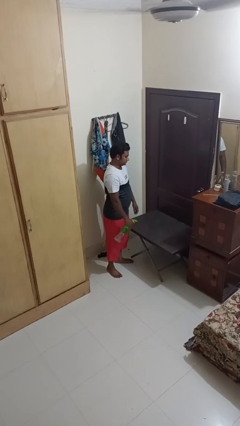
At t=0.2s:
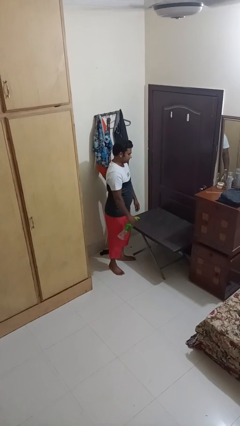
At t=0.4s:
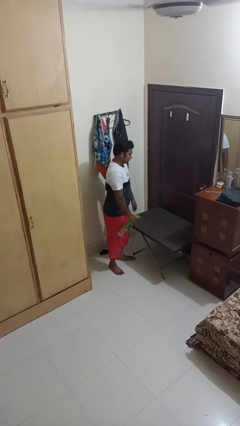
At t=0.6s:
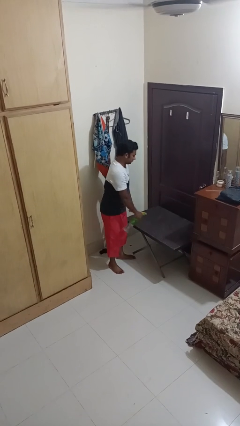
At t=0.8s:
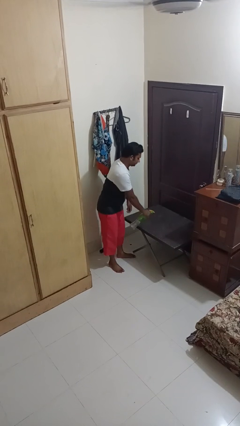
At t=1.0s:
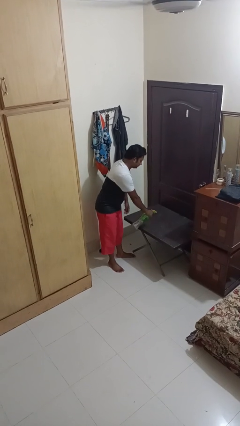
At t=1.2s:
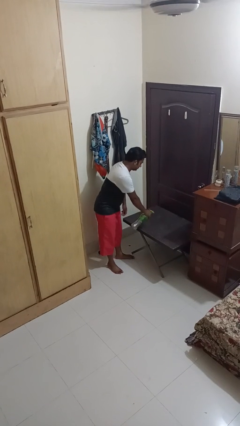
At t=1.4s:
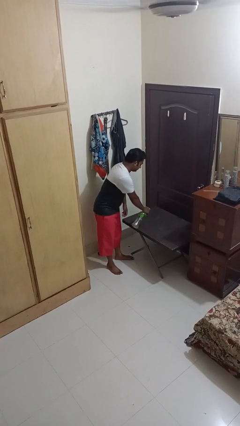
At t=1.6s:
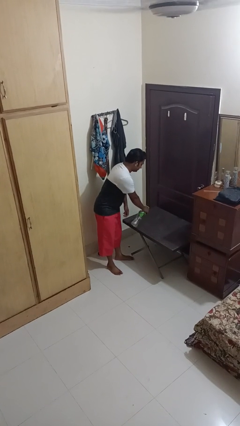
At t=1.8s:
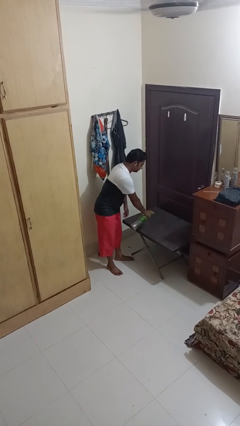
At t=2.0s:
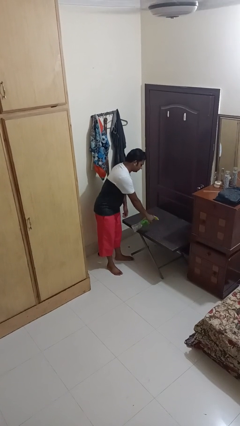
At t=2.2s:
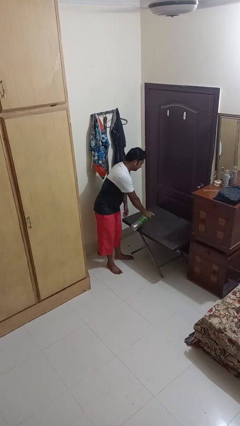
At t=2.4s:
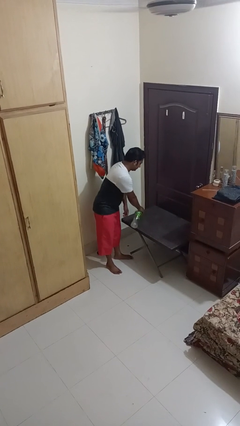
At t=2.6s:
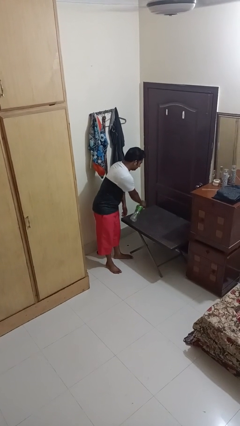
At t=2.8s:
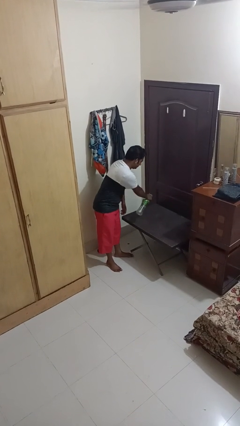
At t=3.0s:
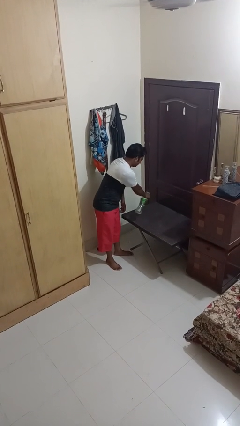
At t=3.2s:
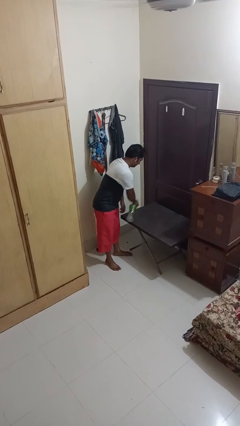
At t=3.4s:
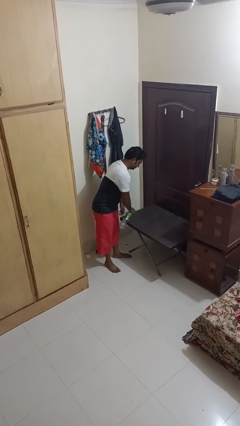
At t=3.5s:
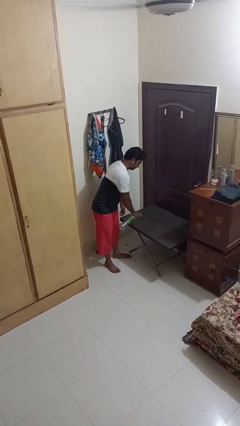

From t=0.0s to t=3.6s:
person sprays from bottle

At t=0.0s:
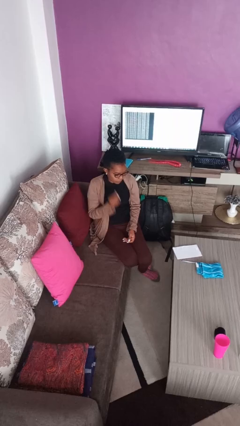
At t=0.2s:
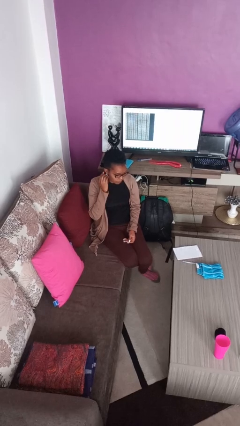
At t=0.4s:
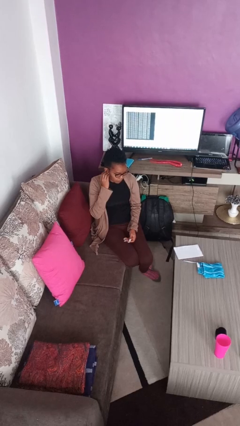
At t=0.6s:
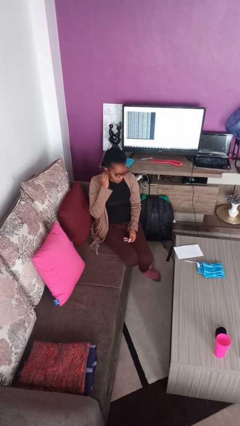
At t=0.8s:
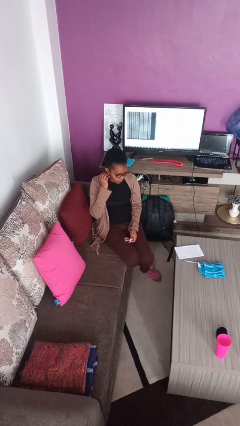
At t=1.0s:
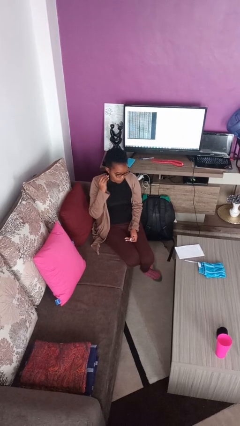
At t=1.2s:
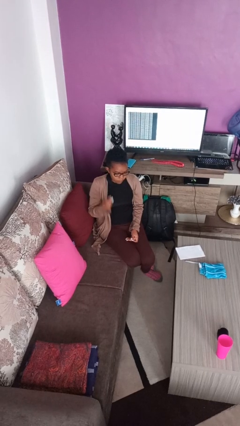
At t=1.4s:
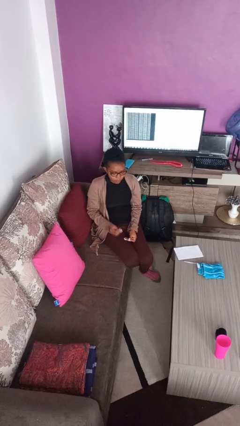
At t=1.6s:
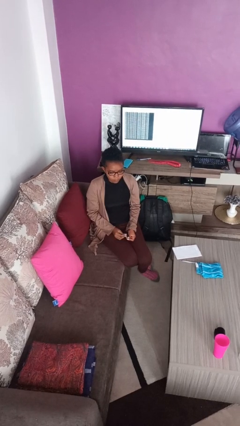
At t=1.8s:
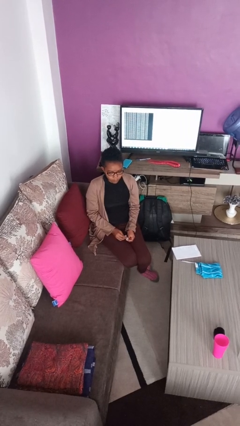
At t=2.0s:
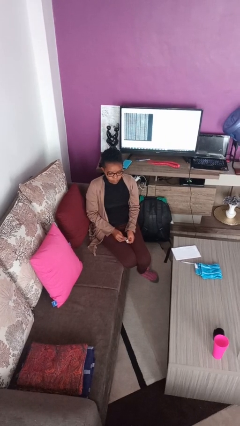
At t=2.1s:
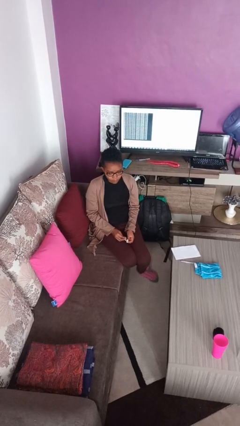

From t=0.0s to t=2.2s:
person takes off earrings

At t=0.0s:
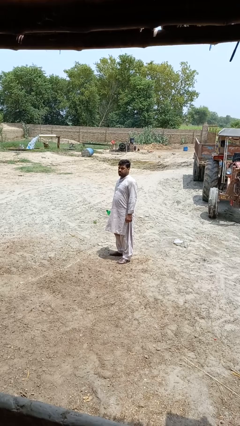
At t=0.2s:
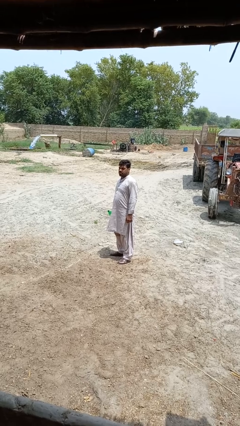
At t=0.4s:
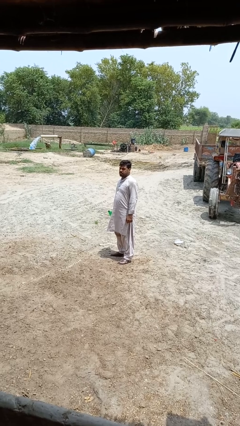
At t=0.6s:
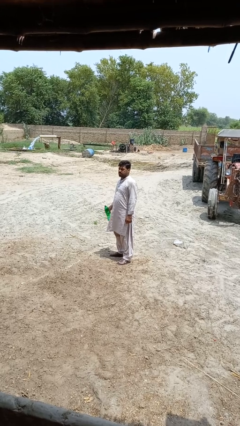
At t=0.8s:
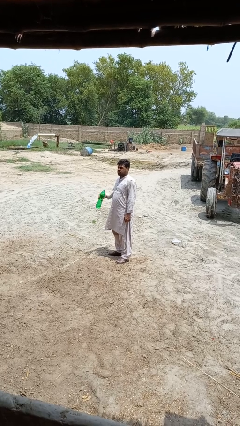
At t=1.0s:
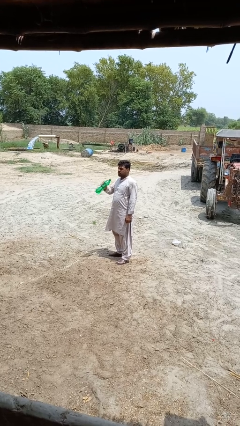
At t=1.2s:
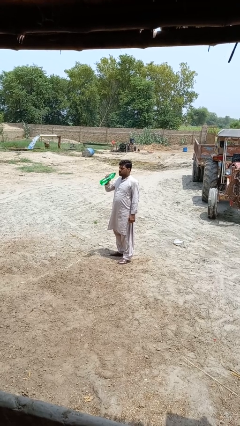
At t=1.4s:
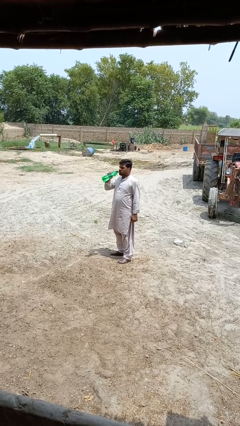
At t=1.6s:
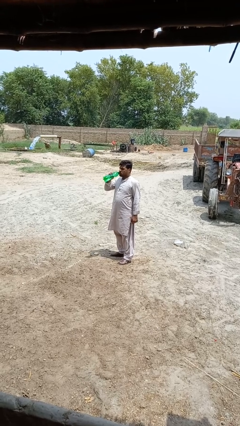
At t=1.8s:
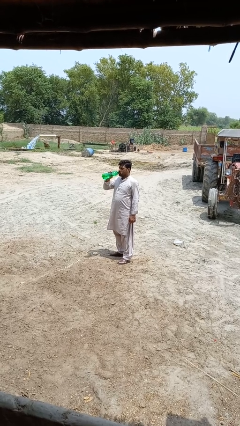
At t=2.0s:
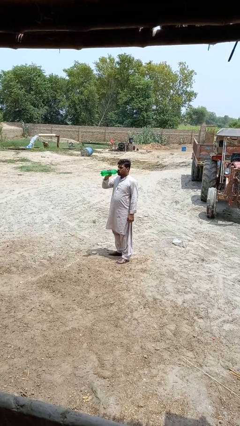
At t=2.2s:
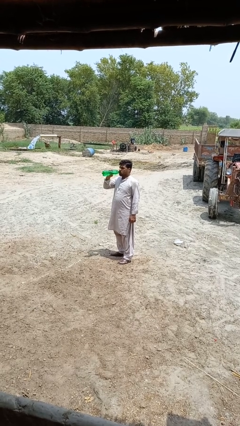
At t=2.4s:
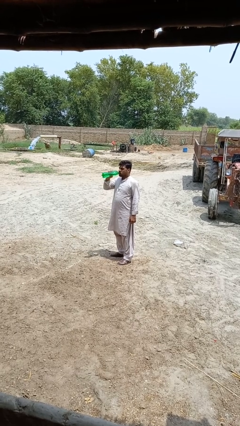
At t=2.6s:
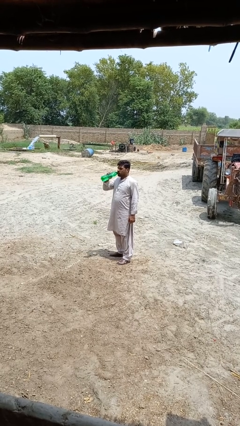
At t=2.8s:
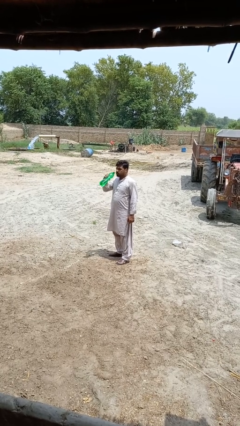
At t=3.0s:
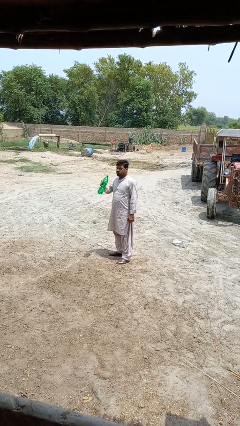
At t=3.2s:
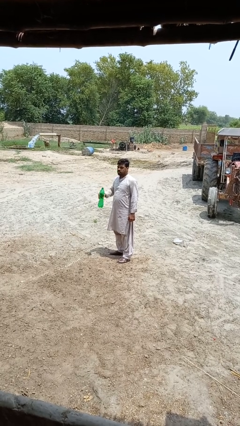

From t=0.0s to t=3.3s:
person drinks from bottle

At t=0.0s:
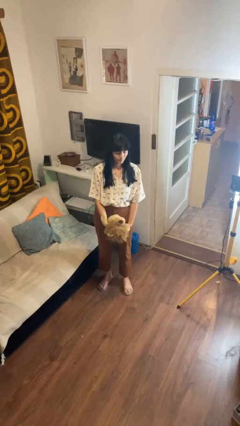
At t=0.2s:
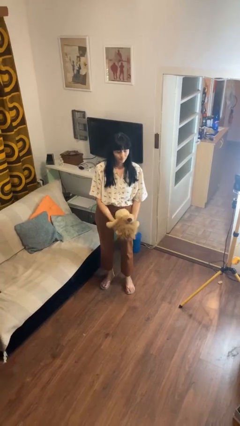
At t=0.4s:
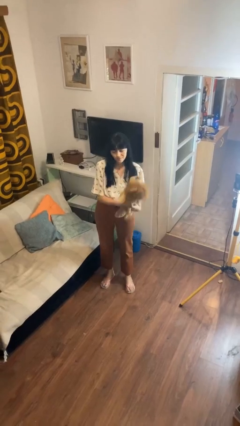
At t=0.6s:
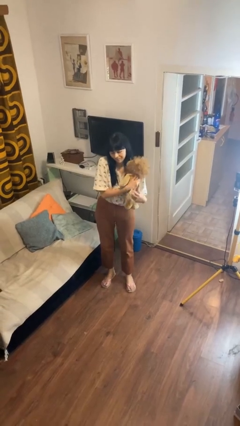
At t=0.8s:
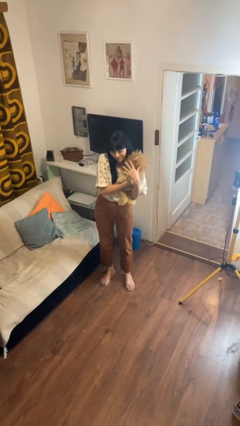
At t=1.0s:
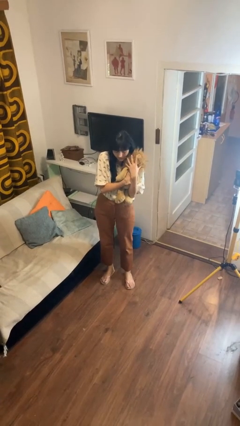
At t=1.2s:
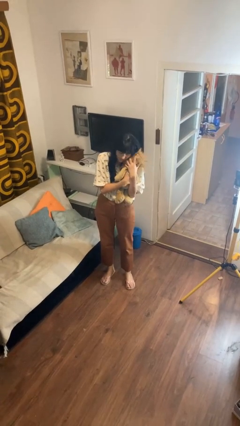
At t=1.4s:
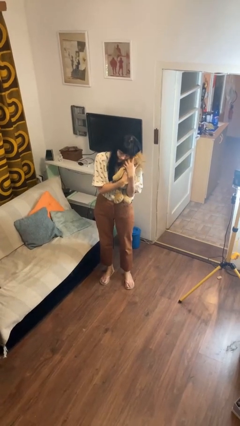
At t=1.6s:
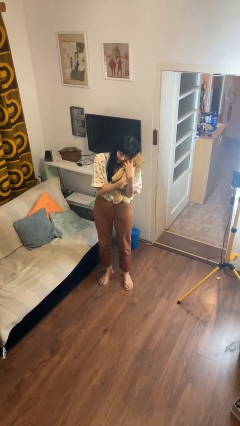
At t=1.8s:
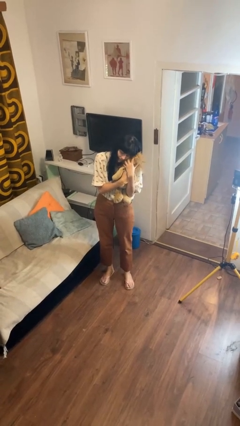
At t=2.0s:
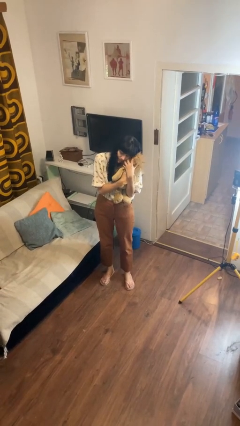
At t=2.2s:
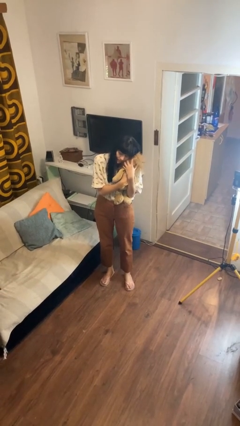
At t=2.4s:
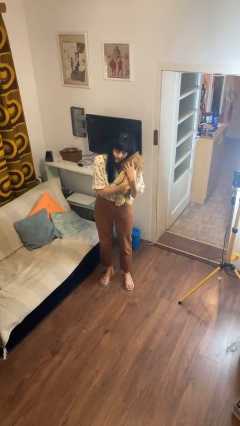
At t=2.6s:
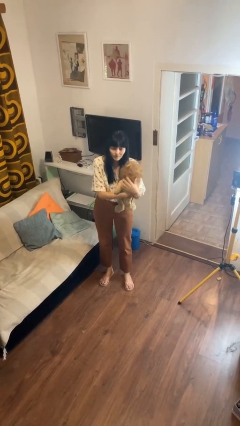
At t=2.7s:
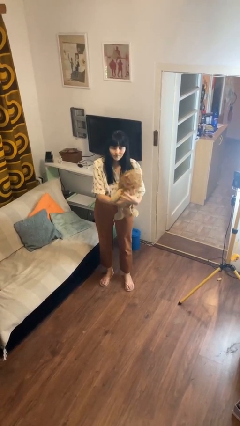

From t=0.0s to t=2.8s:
person hugs stuffed animal

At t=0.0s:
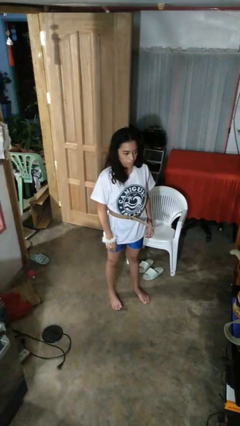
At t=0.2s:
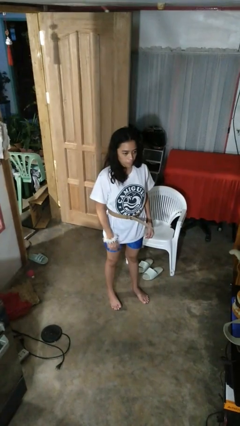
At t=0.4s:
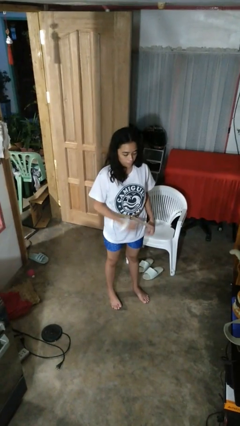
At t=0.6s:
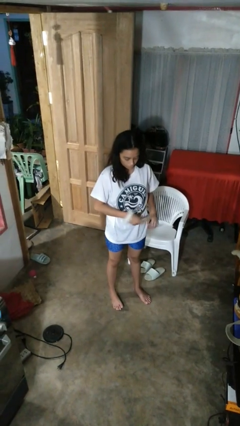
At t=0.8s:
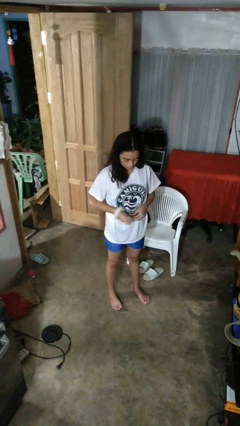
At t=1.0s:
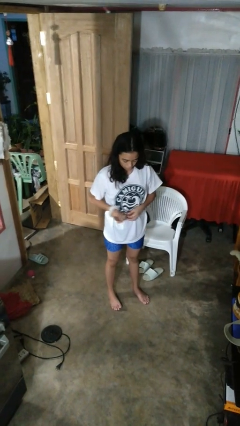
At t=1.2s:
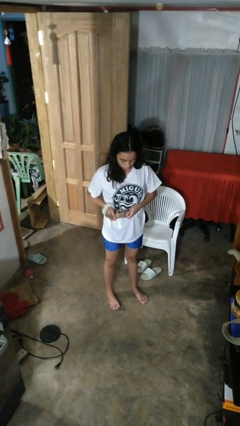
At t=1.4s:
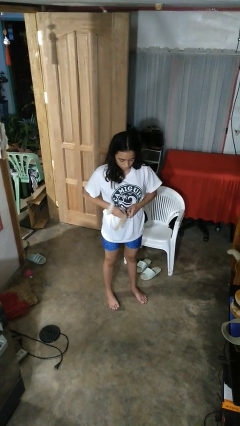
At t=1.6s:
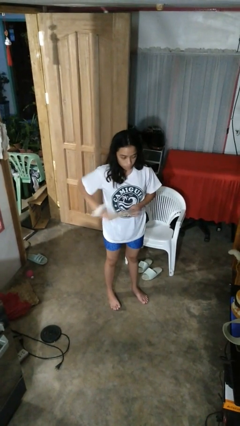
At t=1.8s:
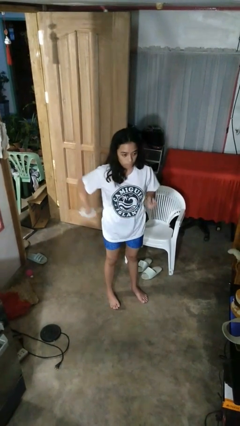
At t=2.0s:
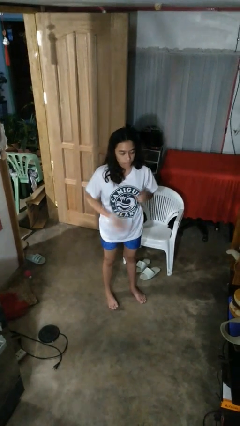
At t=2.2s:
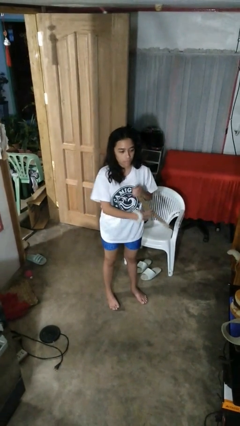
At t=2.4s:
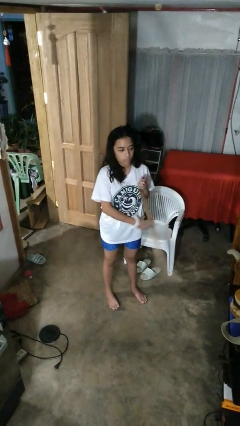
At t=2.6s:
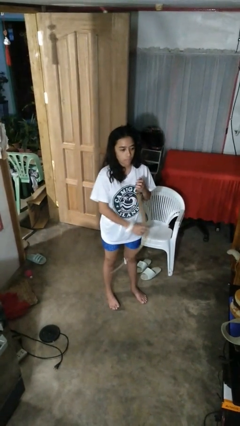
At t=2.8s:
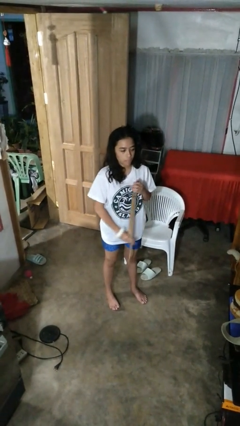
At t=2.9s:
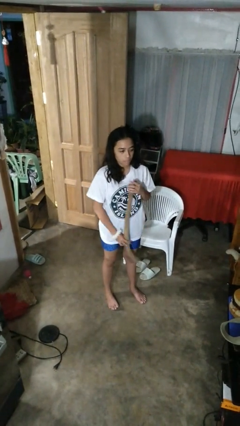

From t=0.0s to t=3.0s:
person takes off belt

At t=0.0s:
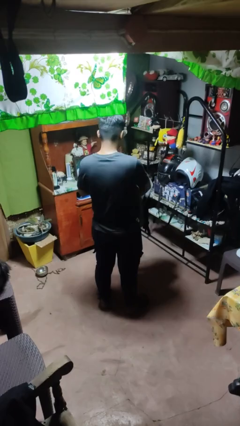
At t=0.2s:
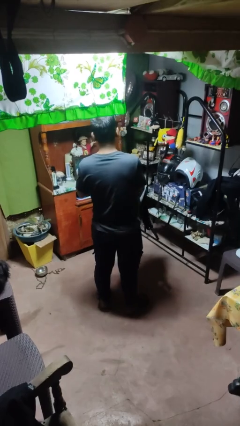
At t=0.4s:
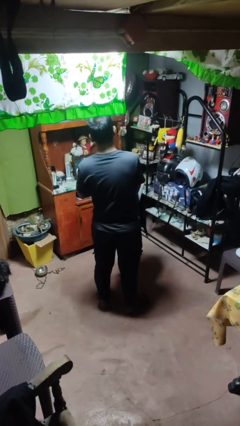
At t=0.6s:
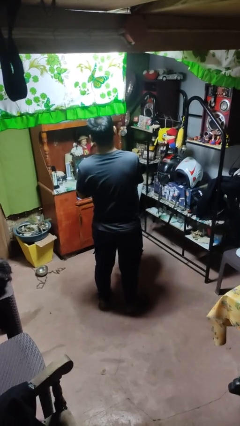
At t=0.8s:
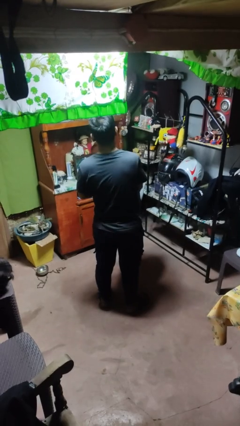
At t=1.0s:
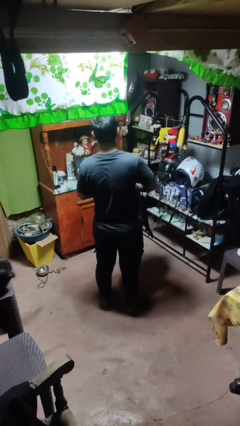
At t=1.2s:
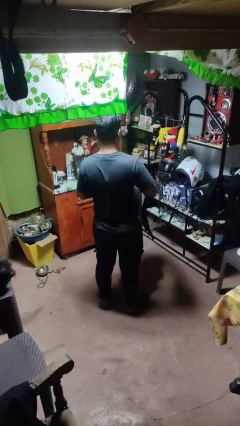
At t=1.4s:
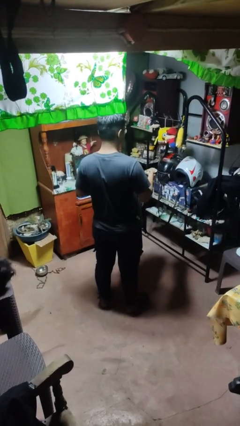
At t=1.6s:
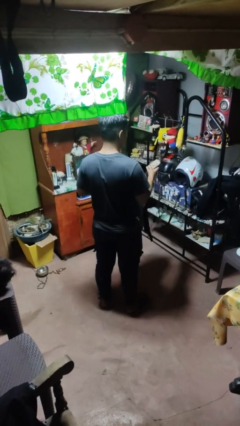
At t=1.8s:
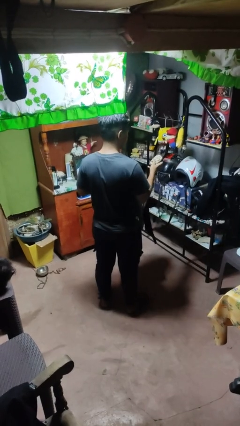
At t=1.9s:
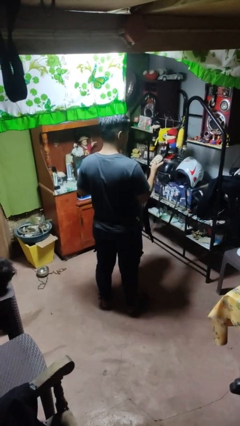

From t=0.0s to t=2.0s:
person takes object from bag

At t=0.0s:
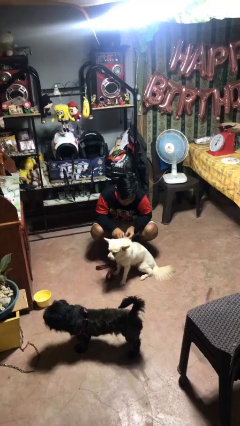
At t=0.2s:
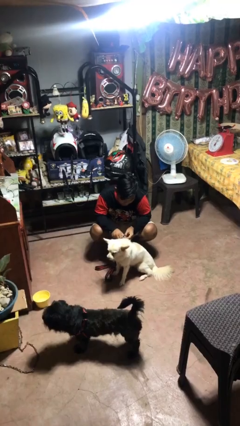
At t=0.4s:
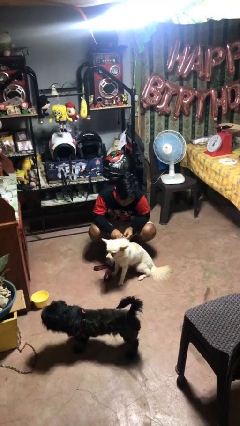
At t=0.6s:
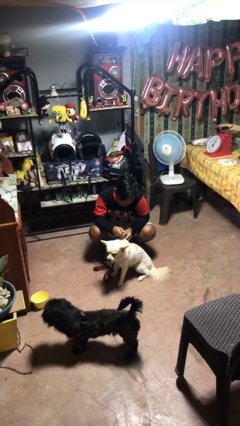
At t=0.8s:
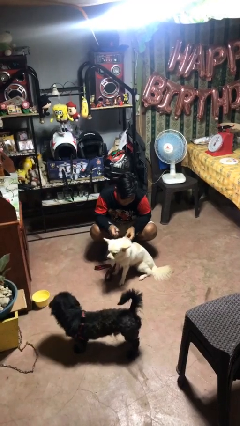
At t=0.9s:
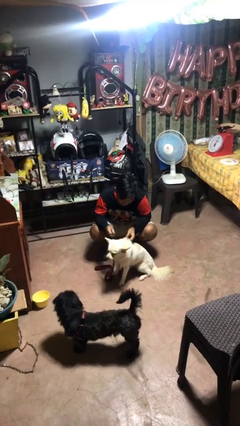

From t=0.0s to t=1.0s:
person unattaches leash from dog
